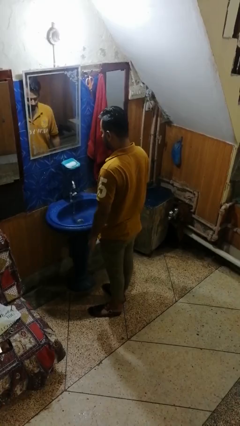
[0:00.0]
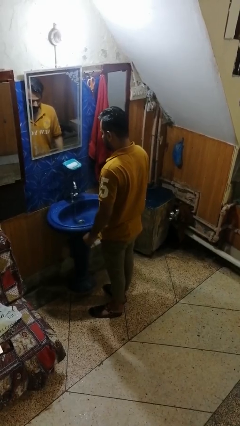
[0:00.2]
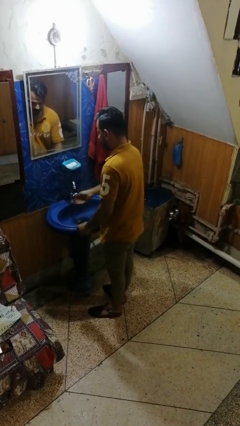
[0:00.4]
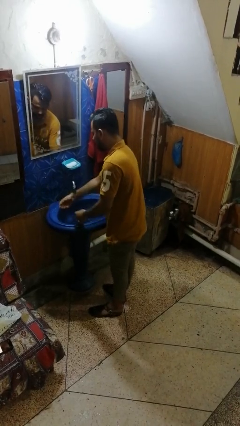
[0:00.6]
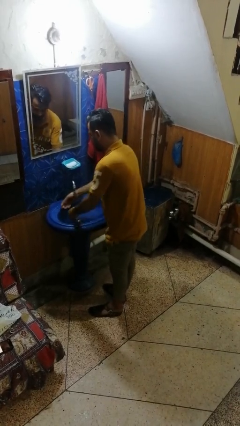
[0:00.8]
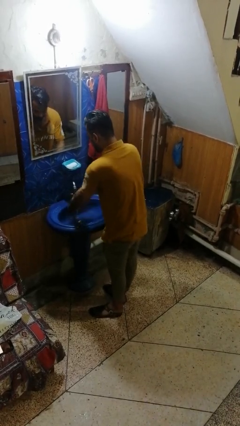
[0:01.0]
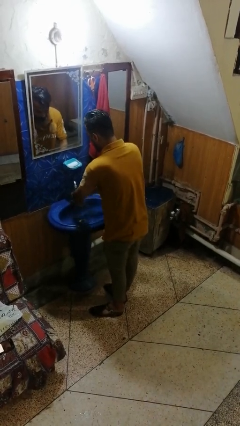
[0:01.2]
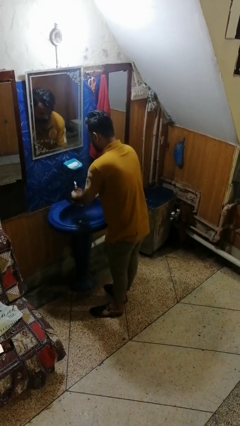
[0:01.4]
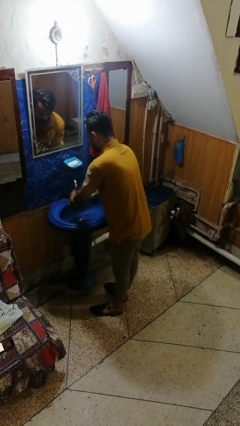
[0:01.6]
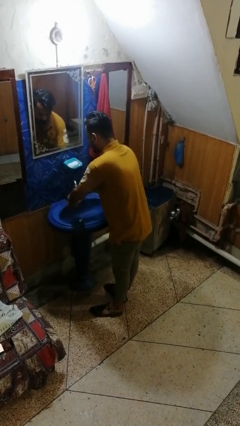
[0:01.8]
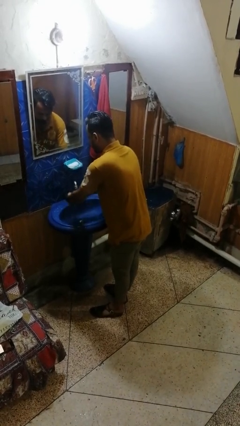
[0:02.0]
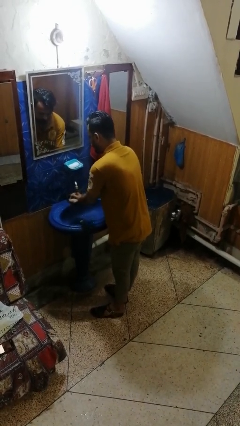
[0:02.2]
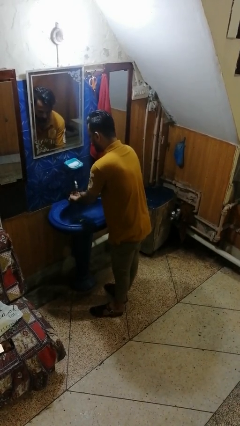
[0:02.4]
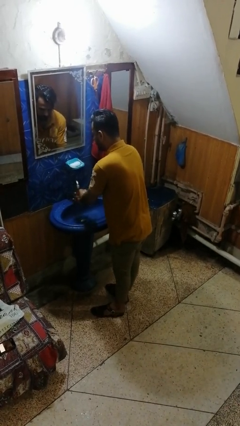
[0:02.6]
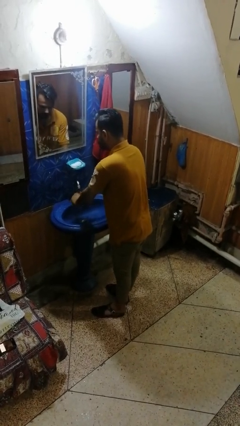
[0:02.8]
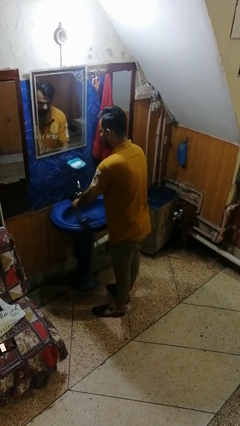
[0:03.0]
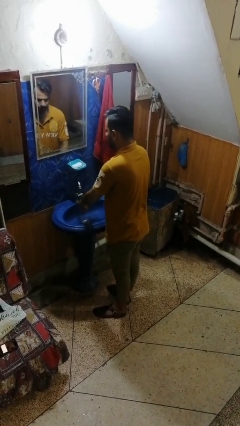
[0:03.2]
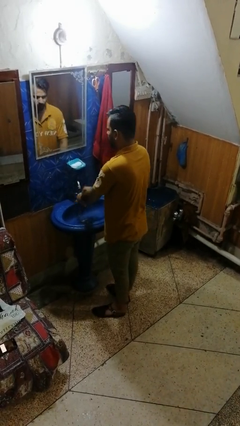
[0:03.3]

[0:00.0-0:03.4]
person washes hands

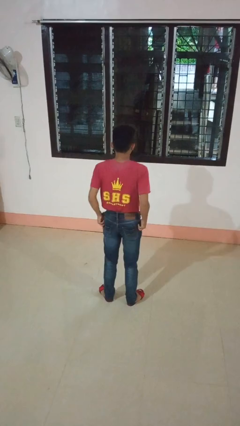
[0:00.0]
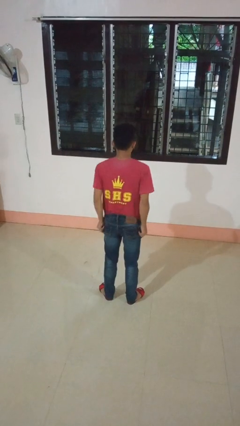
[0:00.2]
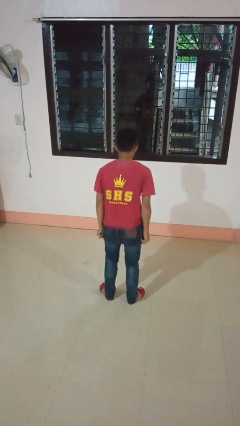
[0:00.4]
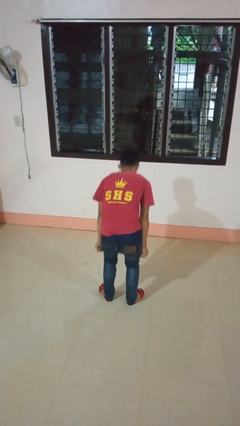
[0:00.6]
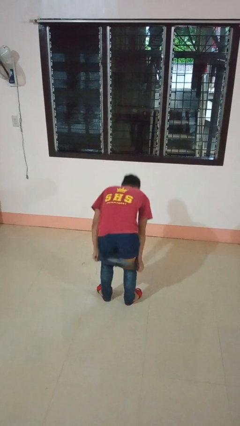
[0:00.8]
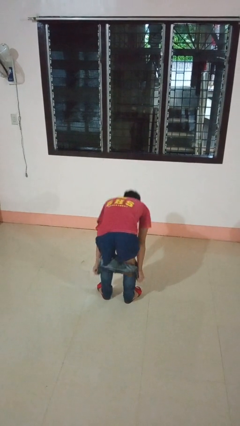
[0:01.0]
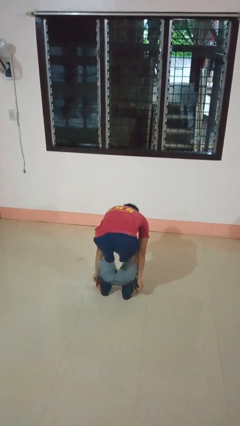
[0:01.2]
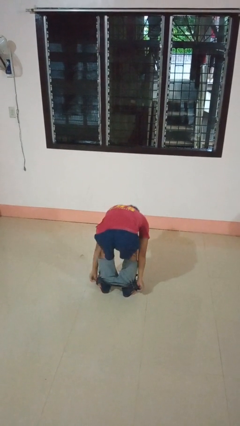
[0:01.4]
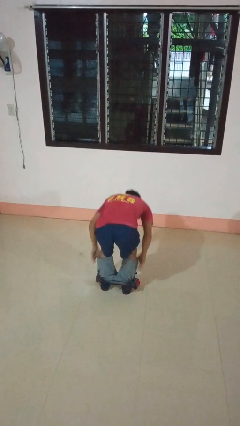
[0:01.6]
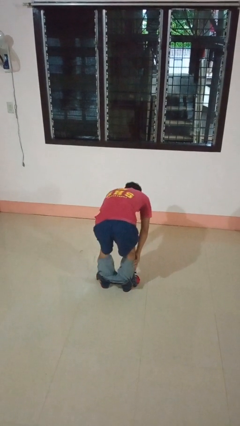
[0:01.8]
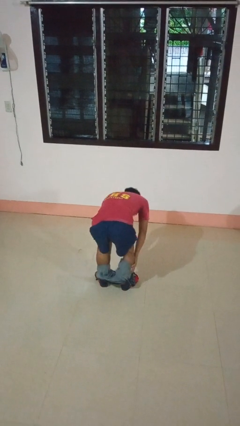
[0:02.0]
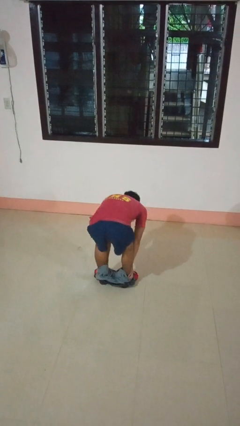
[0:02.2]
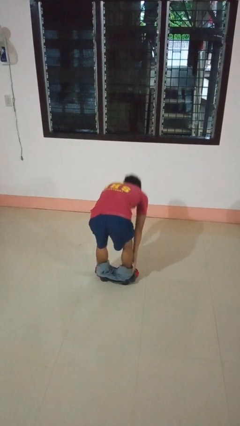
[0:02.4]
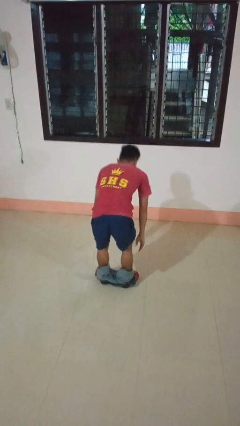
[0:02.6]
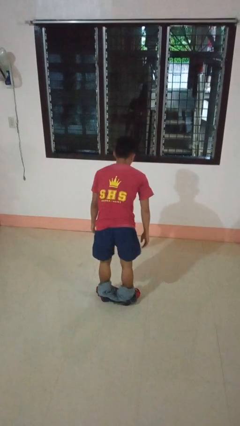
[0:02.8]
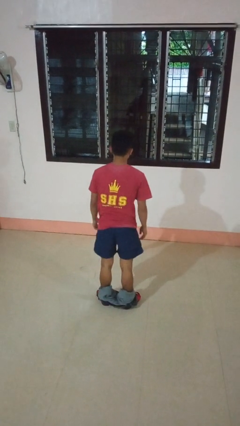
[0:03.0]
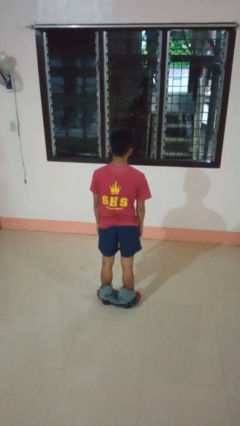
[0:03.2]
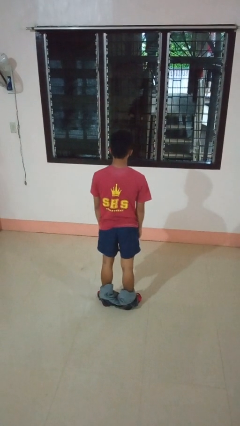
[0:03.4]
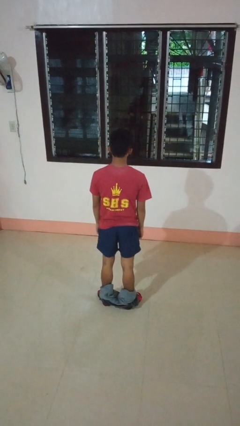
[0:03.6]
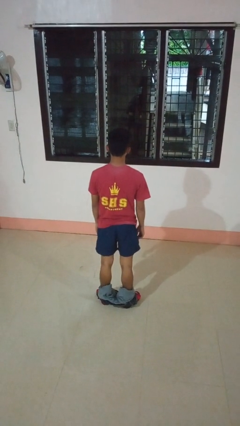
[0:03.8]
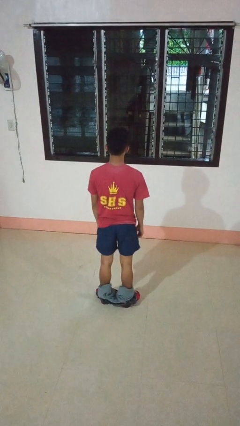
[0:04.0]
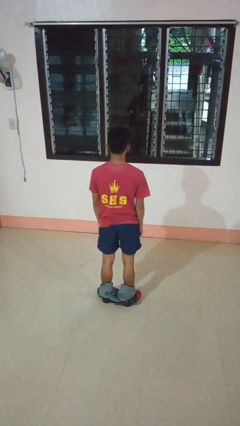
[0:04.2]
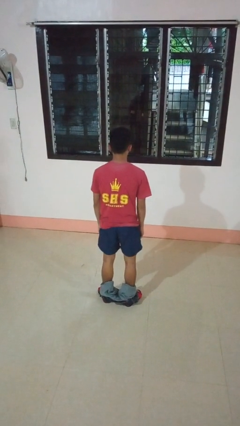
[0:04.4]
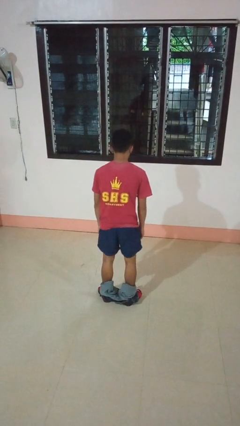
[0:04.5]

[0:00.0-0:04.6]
person takes off pants

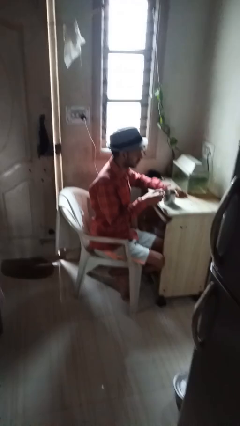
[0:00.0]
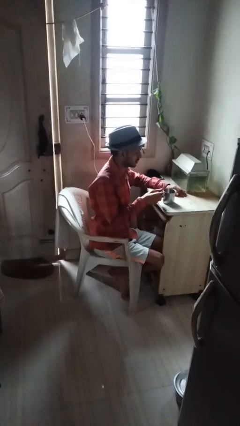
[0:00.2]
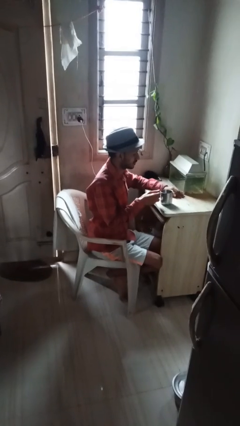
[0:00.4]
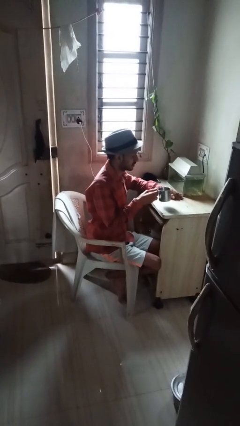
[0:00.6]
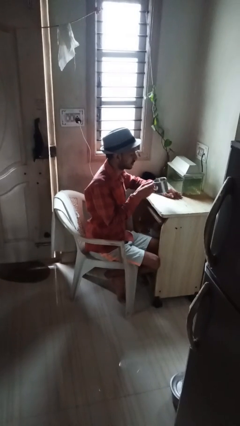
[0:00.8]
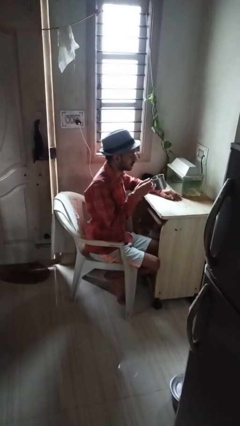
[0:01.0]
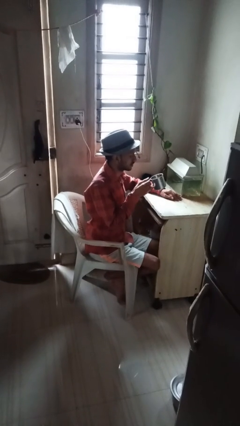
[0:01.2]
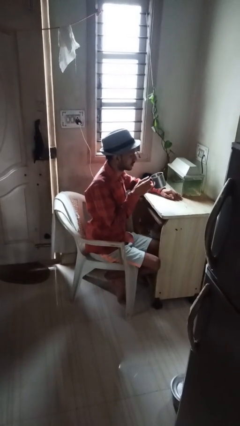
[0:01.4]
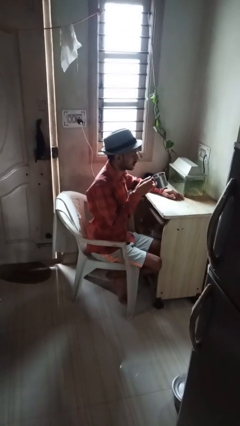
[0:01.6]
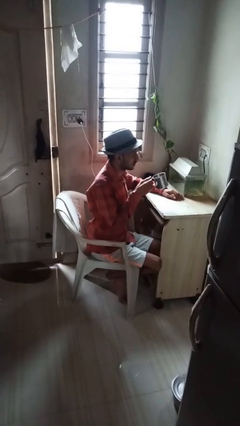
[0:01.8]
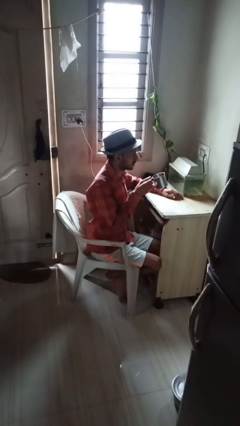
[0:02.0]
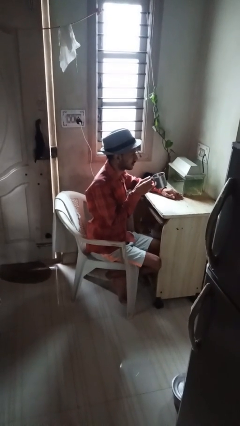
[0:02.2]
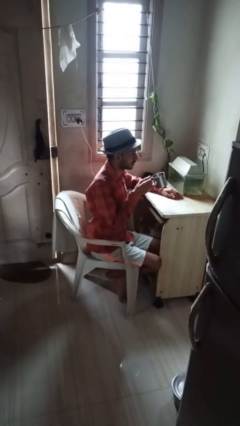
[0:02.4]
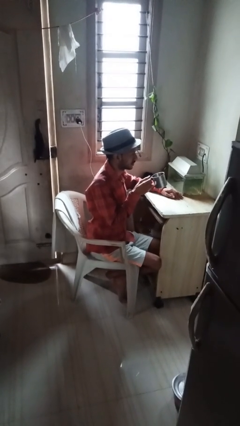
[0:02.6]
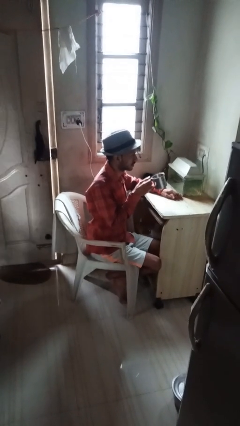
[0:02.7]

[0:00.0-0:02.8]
person picks up object from table

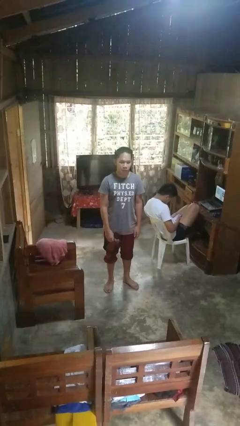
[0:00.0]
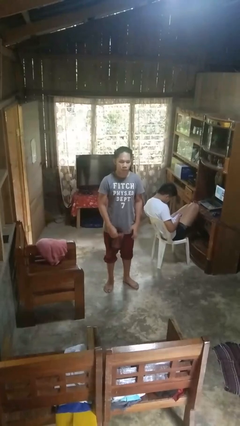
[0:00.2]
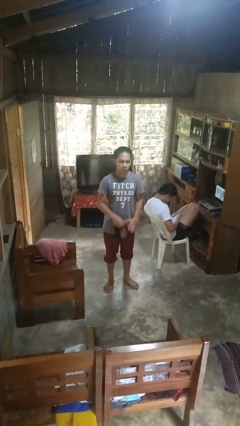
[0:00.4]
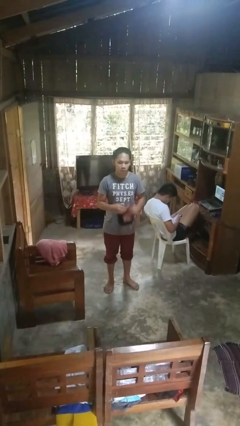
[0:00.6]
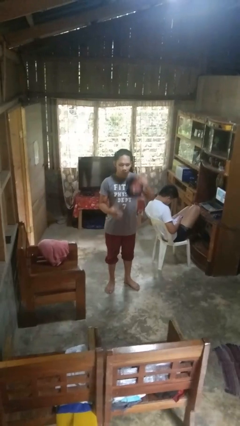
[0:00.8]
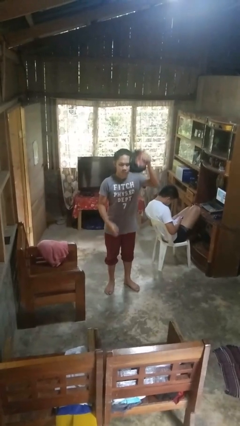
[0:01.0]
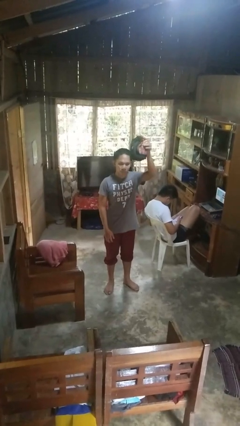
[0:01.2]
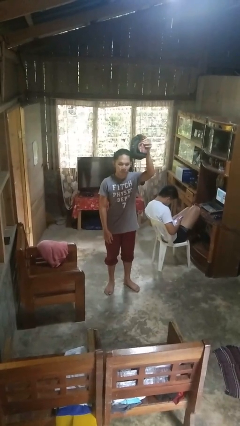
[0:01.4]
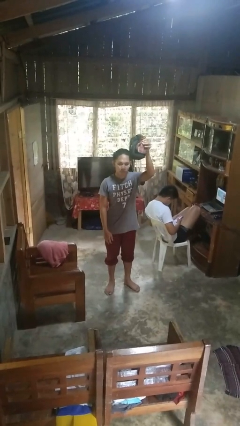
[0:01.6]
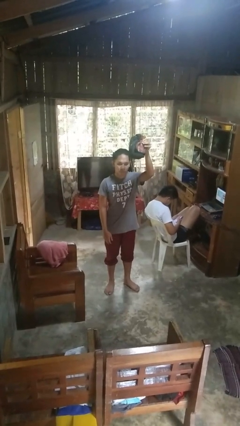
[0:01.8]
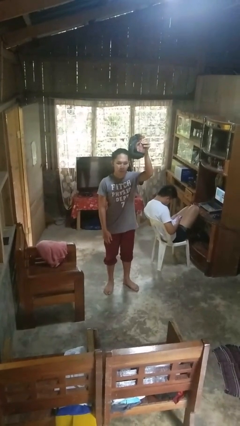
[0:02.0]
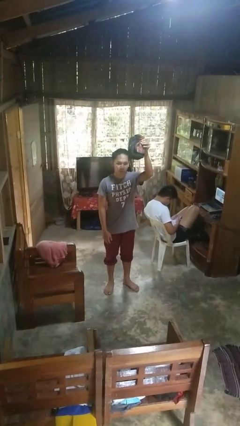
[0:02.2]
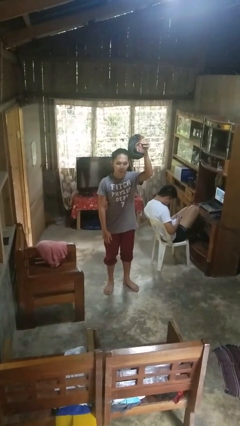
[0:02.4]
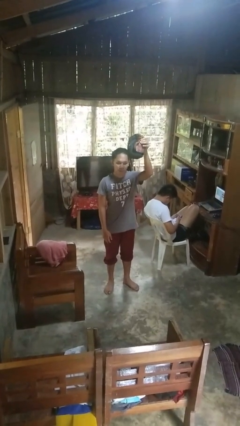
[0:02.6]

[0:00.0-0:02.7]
person holds object above head

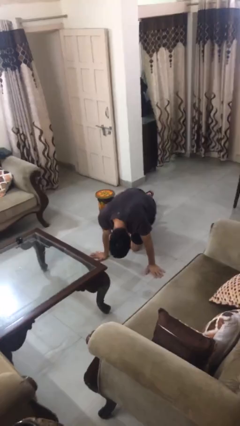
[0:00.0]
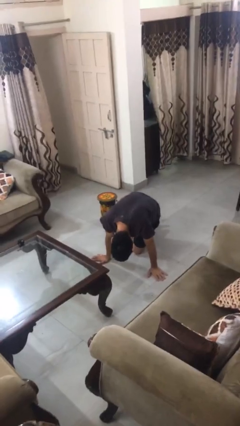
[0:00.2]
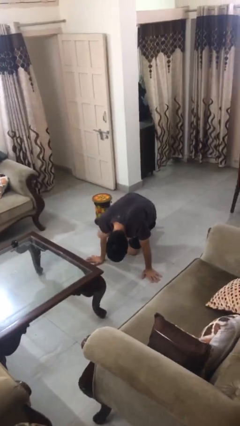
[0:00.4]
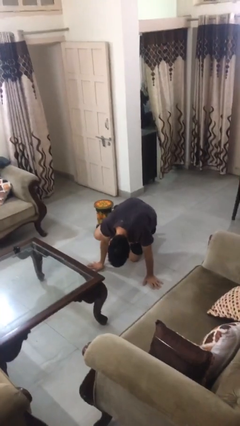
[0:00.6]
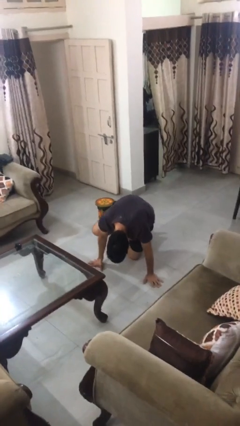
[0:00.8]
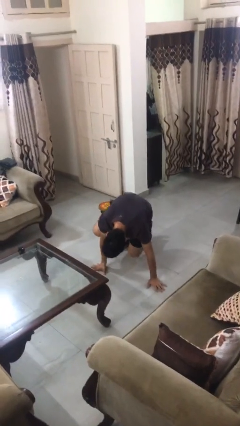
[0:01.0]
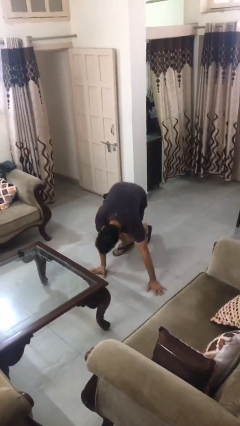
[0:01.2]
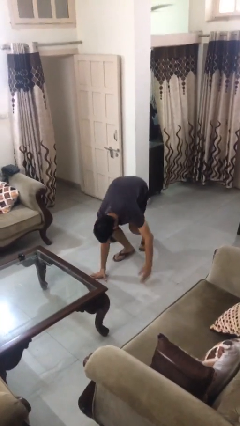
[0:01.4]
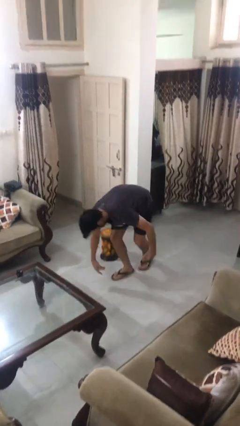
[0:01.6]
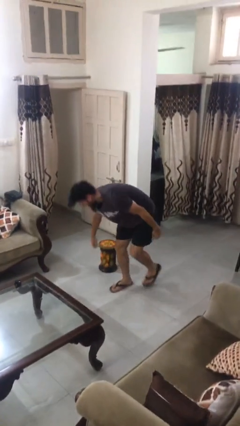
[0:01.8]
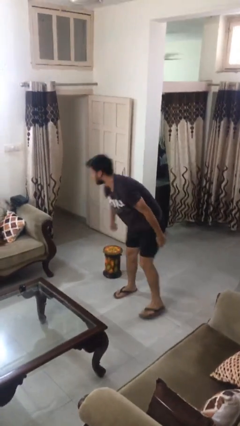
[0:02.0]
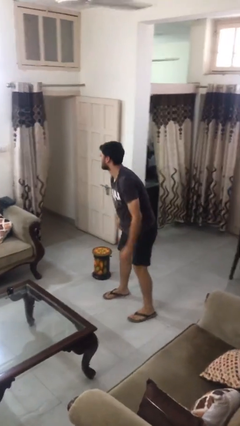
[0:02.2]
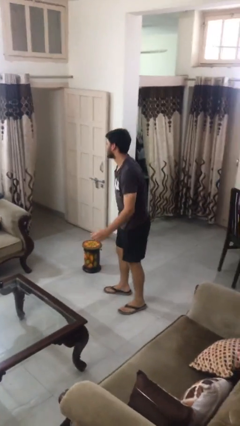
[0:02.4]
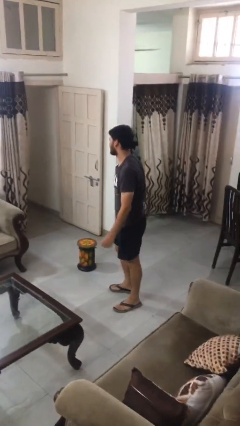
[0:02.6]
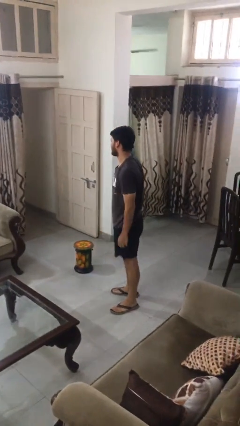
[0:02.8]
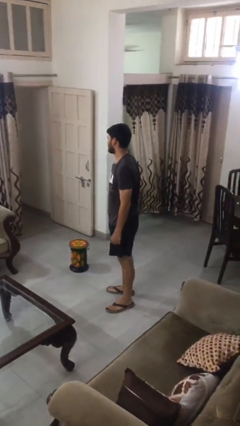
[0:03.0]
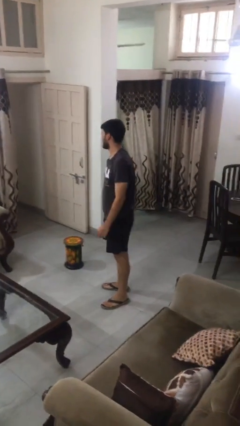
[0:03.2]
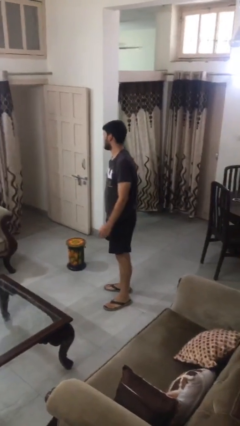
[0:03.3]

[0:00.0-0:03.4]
person stands up from floor

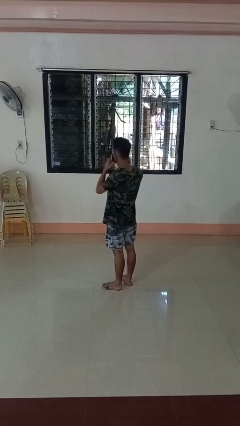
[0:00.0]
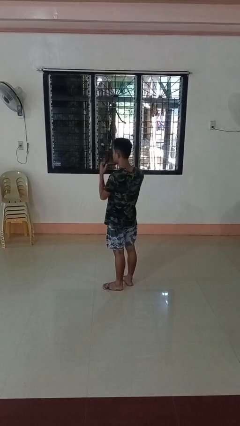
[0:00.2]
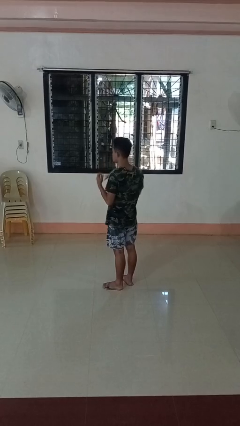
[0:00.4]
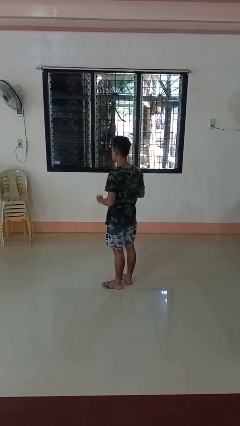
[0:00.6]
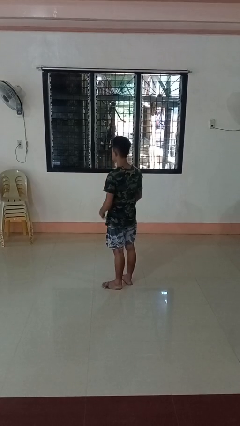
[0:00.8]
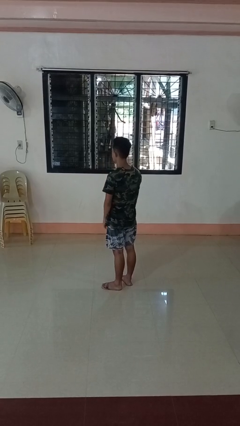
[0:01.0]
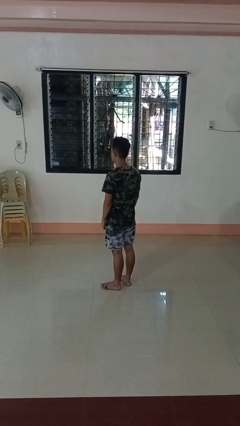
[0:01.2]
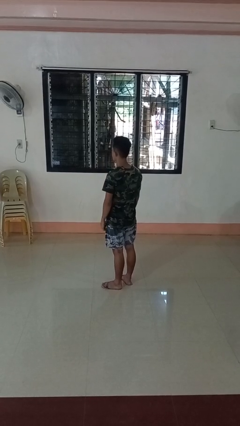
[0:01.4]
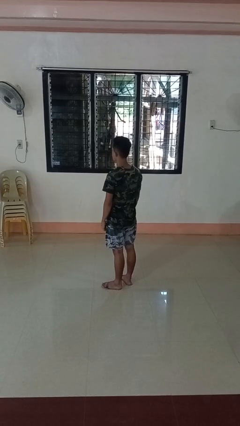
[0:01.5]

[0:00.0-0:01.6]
person takes off facemask
